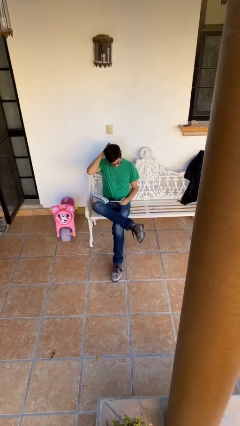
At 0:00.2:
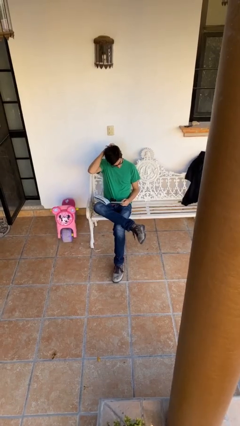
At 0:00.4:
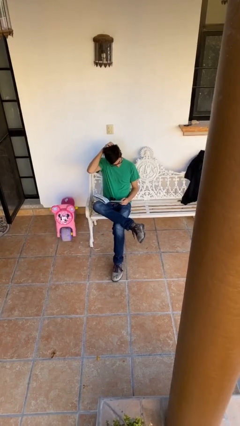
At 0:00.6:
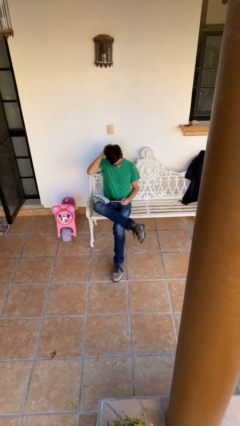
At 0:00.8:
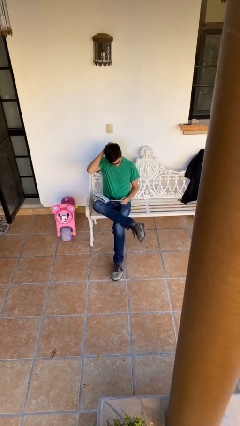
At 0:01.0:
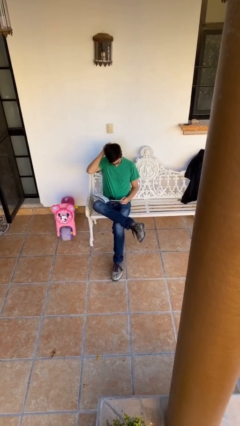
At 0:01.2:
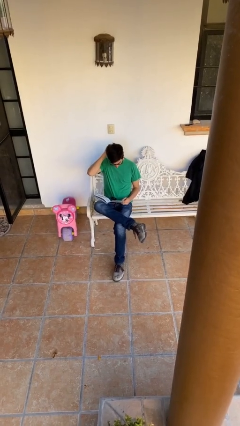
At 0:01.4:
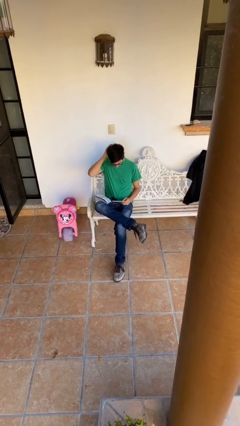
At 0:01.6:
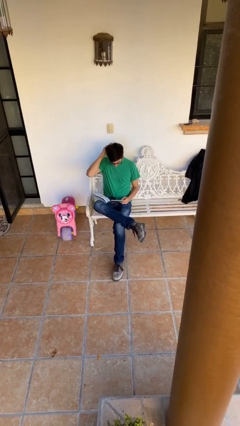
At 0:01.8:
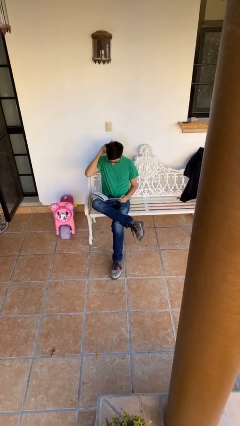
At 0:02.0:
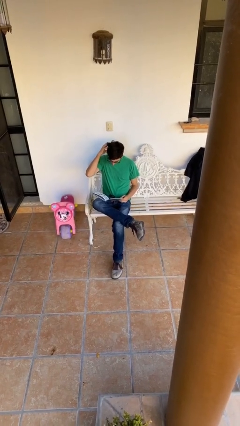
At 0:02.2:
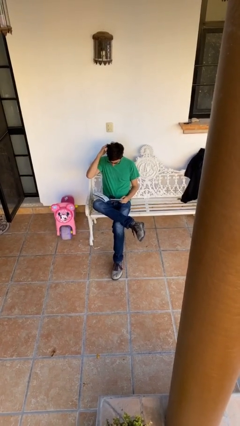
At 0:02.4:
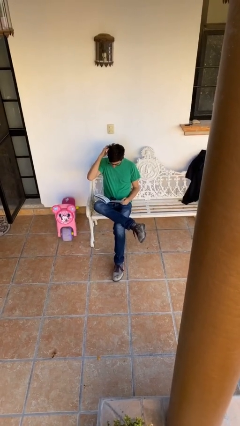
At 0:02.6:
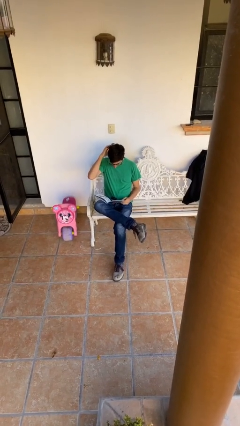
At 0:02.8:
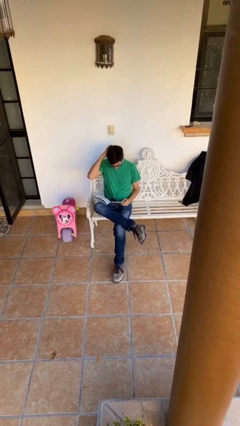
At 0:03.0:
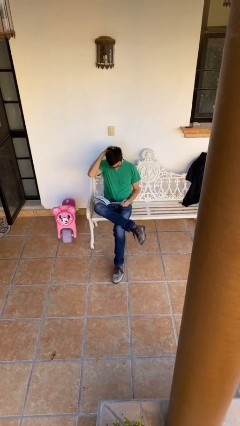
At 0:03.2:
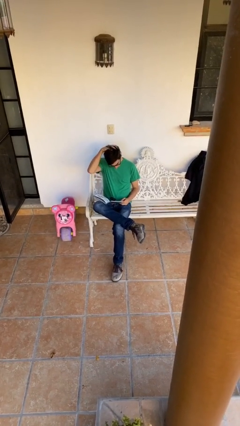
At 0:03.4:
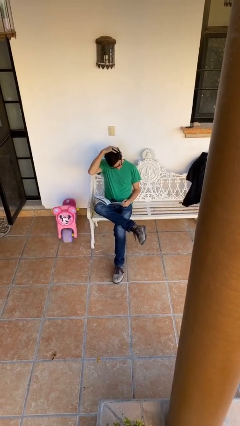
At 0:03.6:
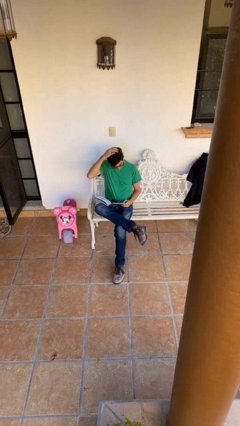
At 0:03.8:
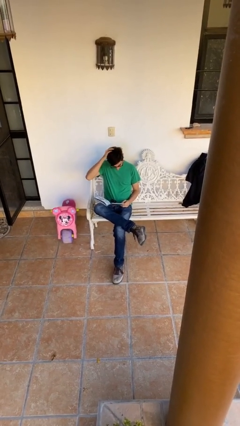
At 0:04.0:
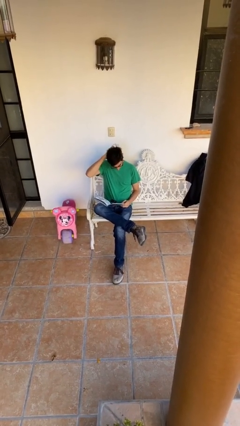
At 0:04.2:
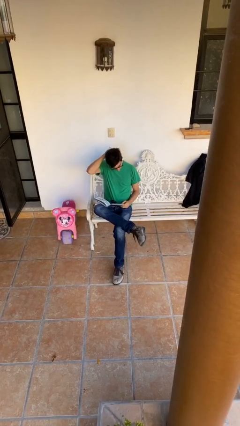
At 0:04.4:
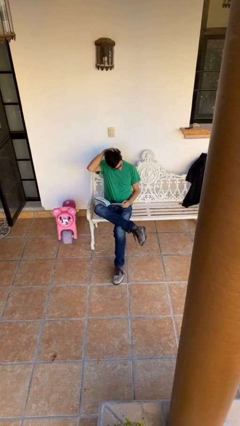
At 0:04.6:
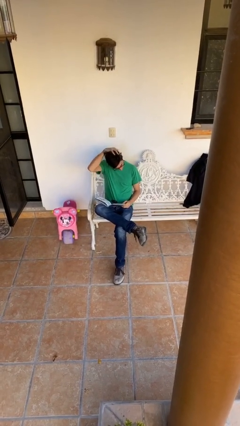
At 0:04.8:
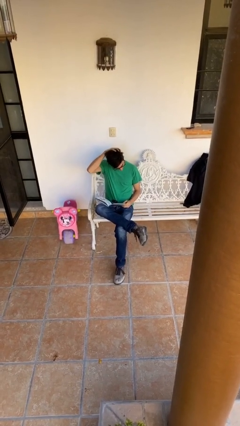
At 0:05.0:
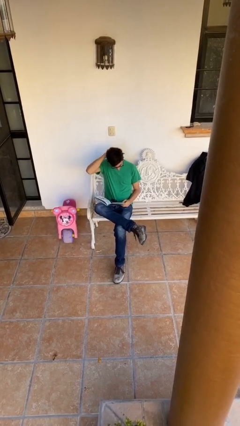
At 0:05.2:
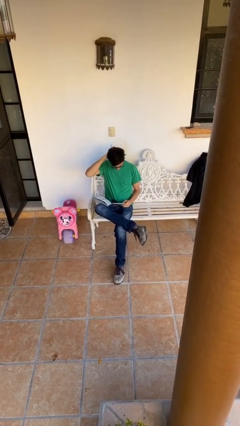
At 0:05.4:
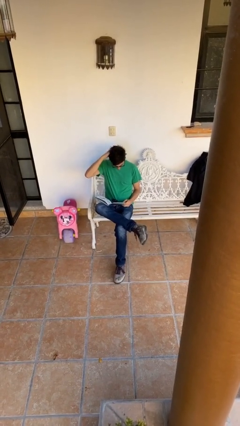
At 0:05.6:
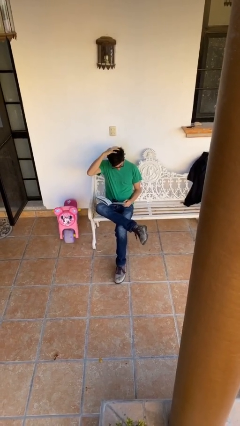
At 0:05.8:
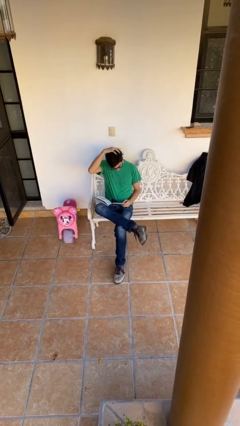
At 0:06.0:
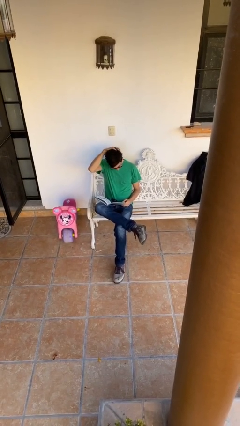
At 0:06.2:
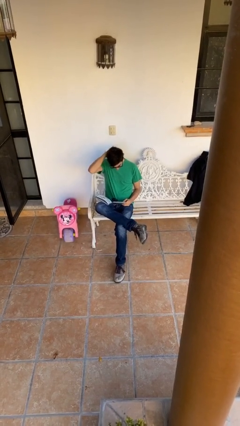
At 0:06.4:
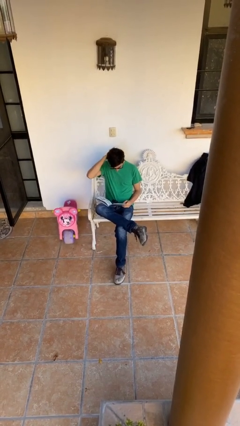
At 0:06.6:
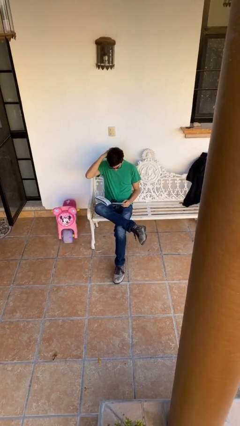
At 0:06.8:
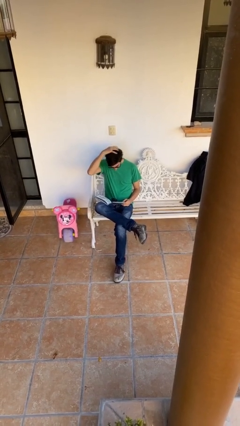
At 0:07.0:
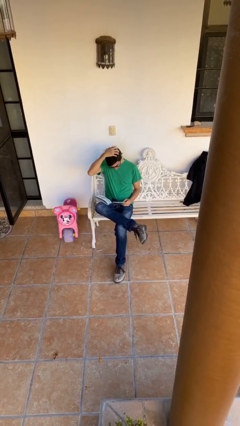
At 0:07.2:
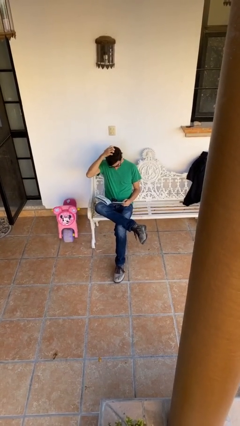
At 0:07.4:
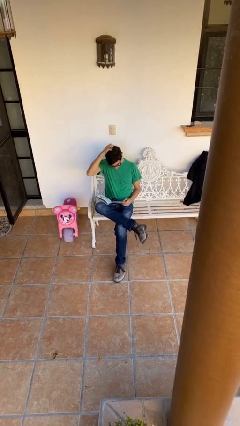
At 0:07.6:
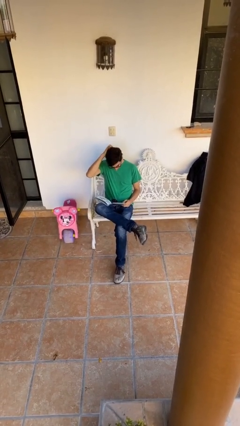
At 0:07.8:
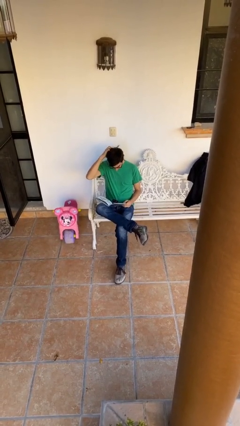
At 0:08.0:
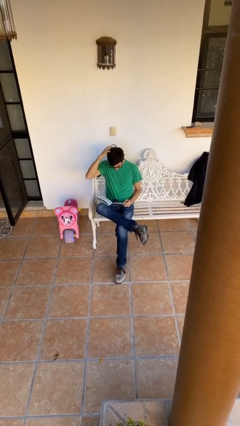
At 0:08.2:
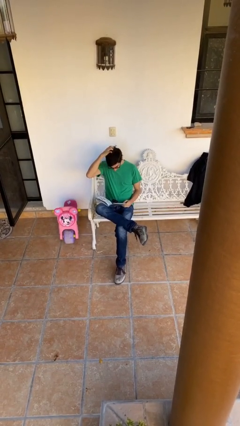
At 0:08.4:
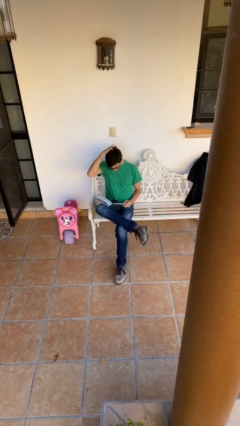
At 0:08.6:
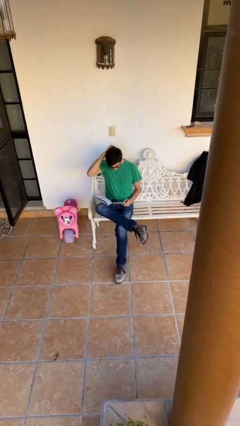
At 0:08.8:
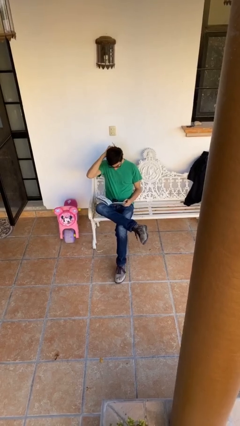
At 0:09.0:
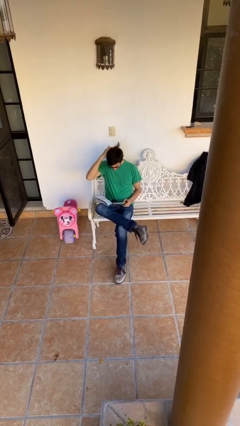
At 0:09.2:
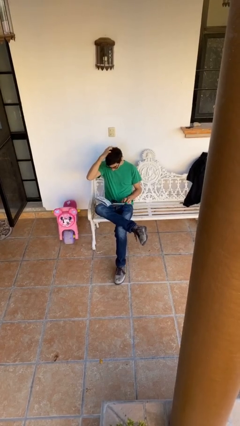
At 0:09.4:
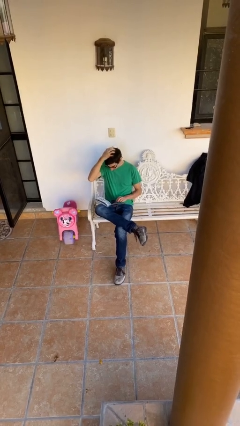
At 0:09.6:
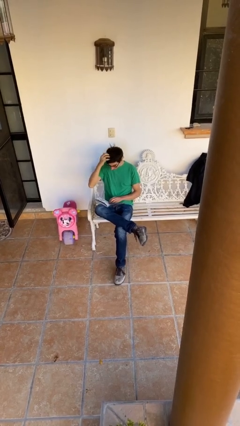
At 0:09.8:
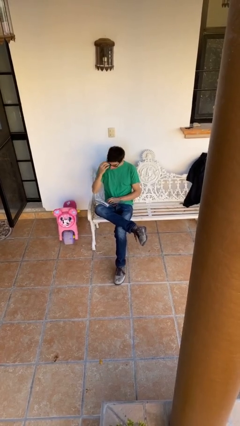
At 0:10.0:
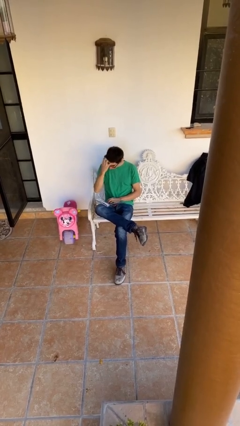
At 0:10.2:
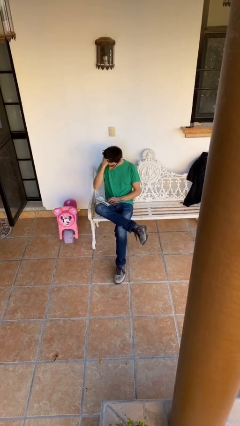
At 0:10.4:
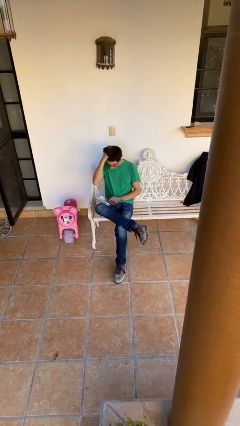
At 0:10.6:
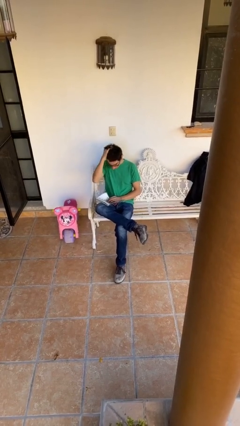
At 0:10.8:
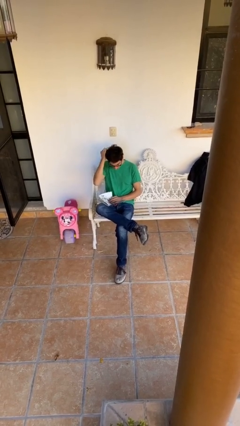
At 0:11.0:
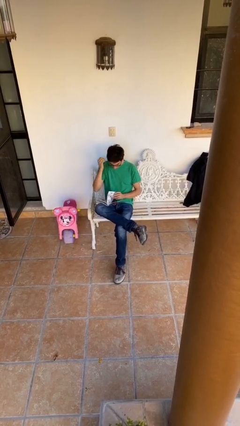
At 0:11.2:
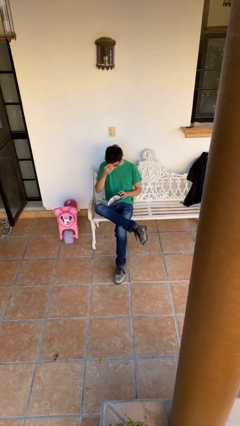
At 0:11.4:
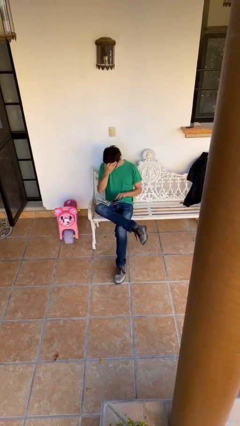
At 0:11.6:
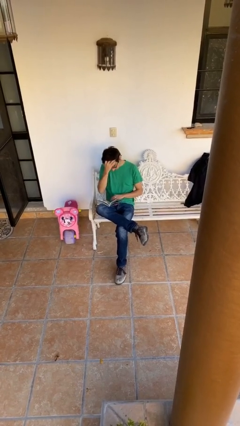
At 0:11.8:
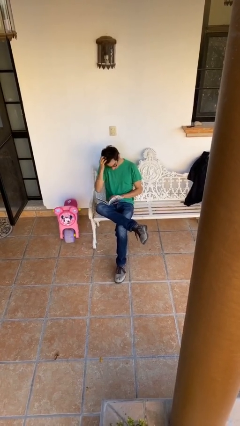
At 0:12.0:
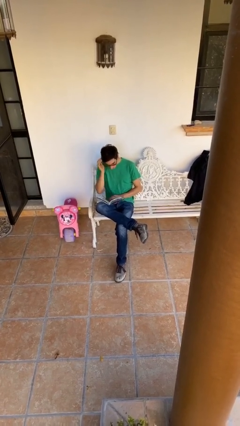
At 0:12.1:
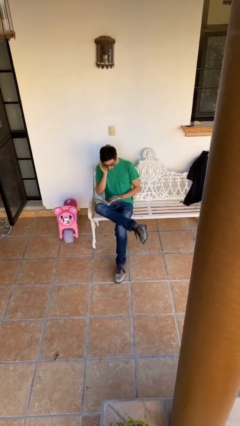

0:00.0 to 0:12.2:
person reads document

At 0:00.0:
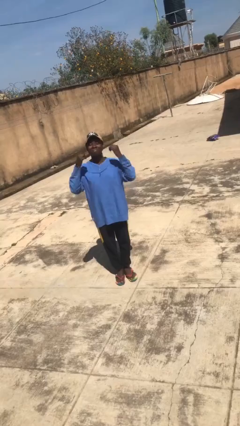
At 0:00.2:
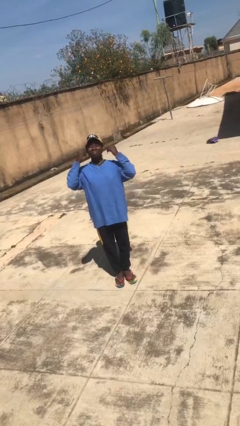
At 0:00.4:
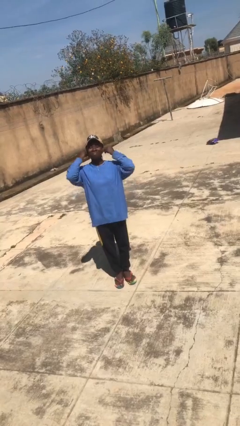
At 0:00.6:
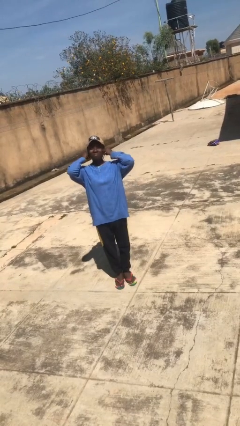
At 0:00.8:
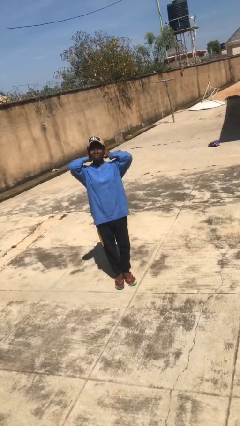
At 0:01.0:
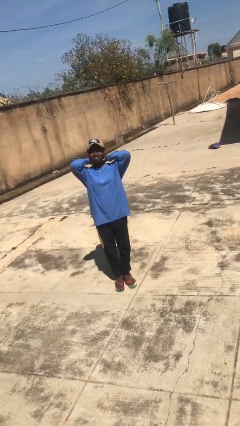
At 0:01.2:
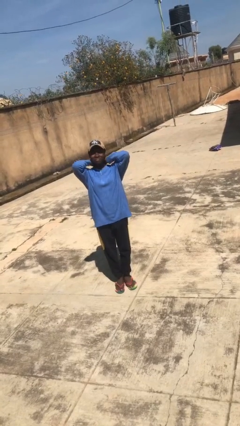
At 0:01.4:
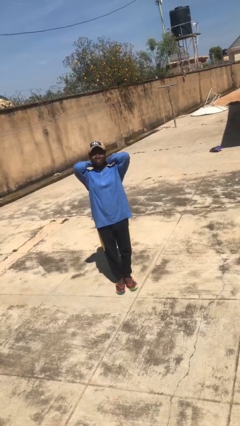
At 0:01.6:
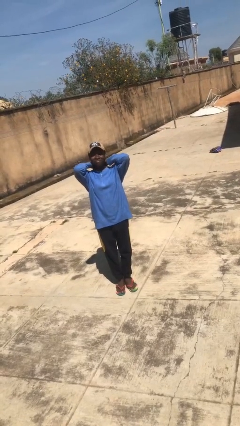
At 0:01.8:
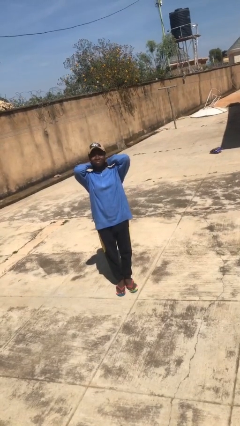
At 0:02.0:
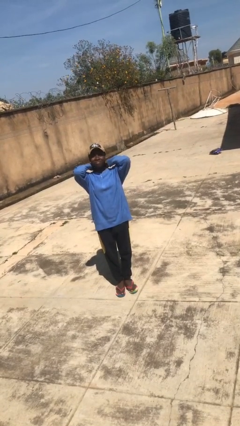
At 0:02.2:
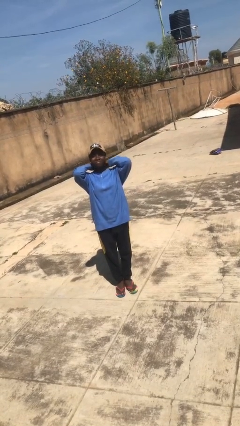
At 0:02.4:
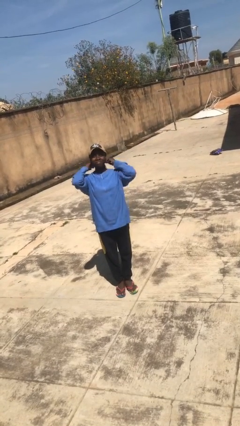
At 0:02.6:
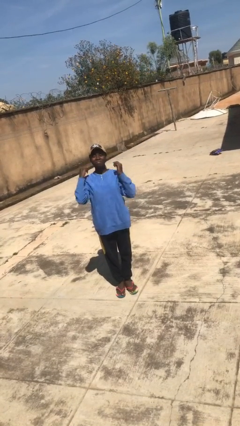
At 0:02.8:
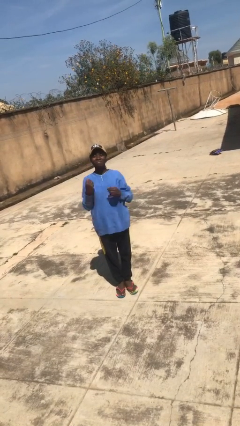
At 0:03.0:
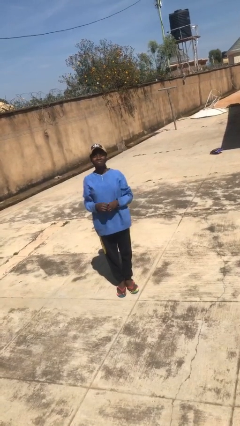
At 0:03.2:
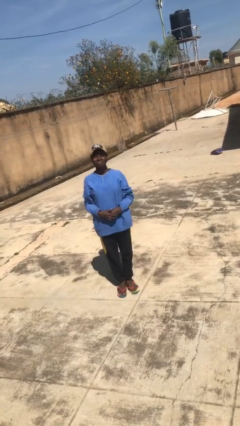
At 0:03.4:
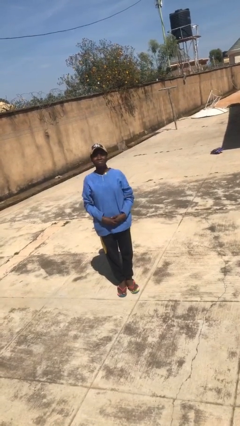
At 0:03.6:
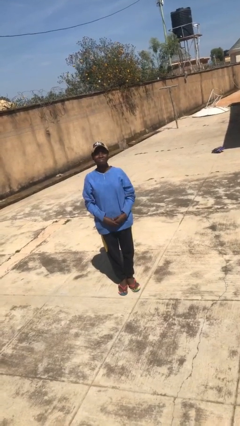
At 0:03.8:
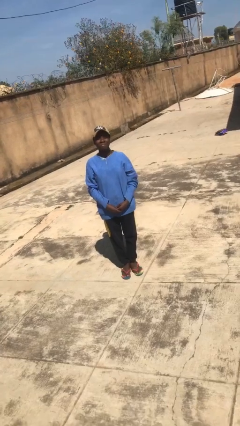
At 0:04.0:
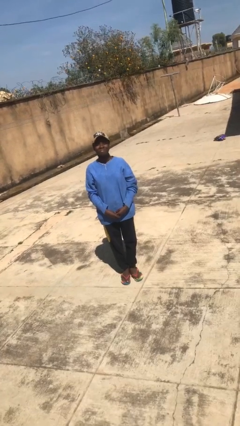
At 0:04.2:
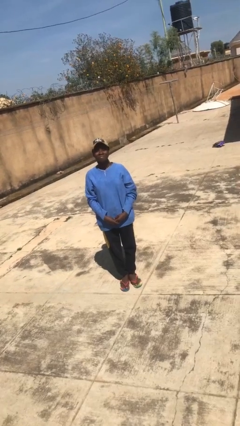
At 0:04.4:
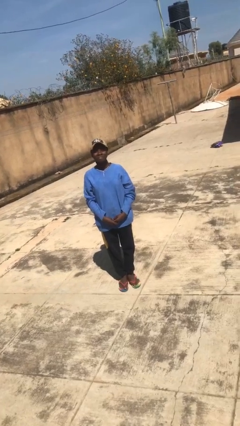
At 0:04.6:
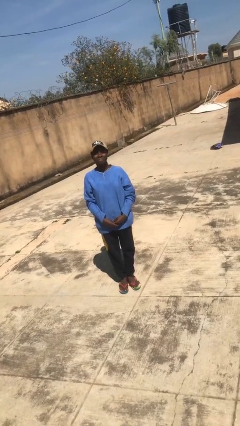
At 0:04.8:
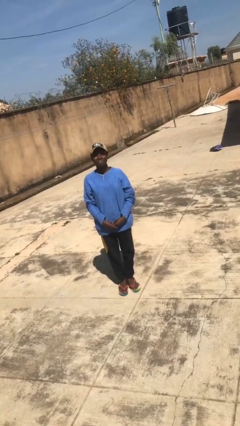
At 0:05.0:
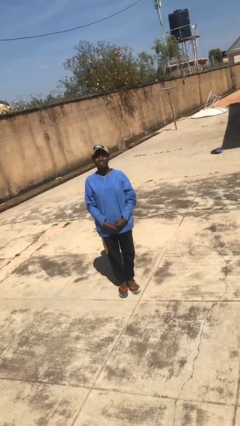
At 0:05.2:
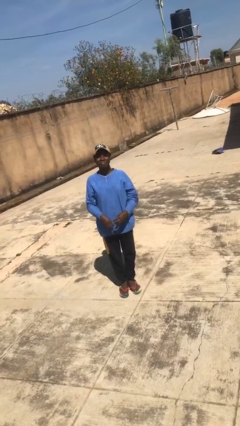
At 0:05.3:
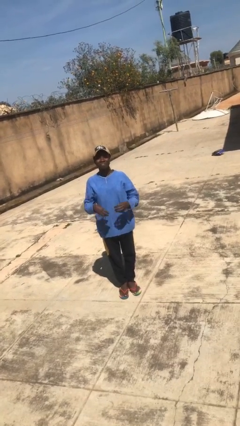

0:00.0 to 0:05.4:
person puts on necklace

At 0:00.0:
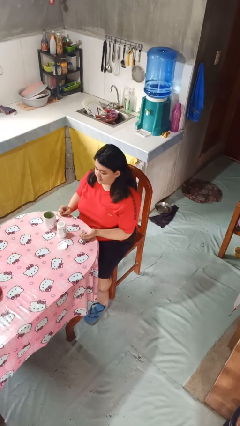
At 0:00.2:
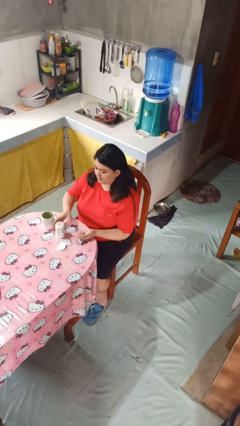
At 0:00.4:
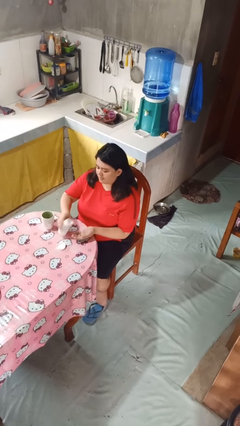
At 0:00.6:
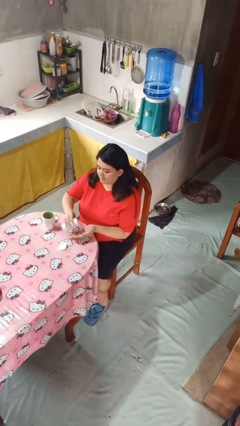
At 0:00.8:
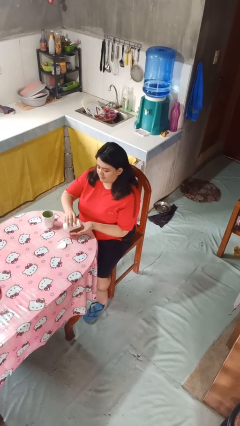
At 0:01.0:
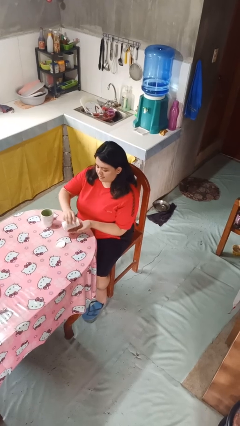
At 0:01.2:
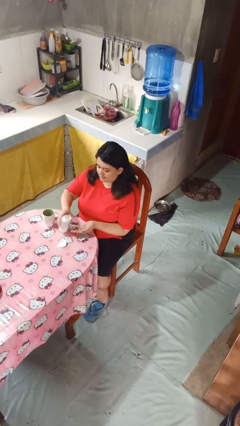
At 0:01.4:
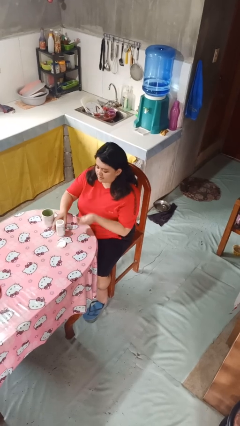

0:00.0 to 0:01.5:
person takes medicine pills
